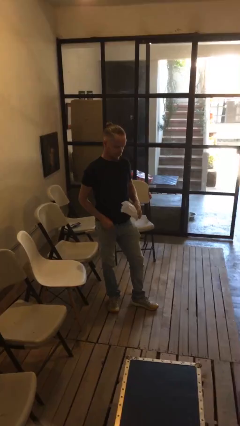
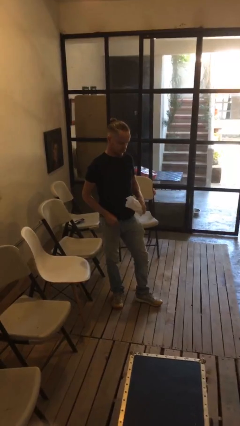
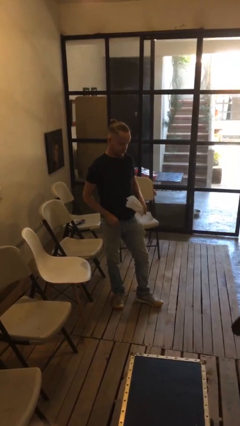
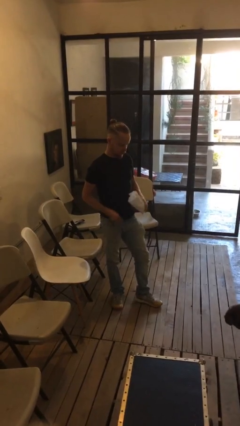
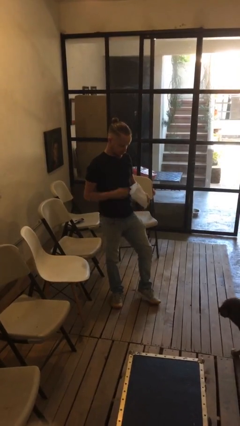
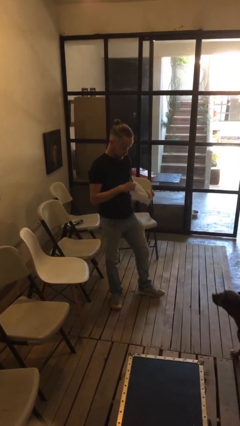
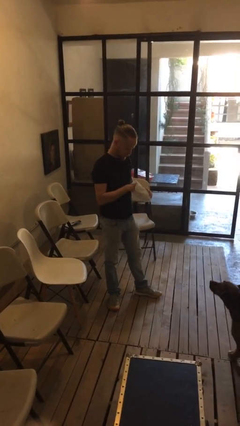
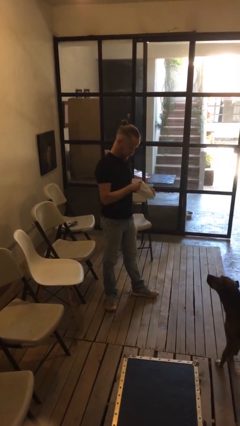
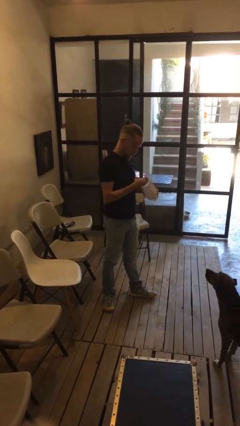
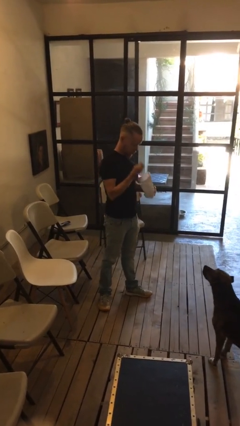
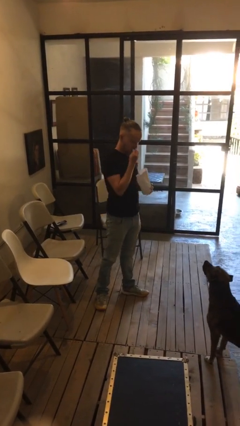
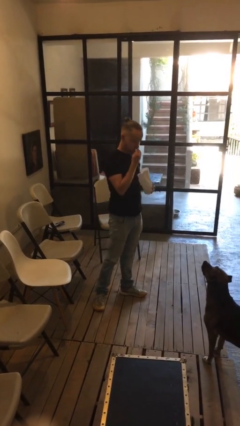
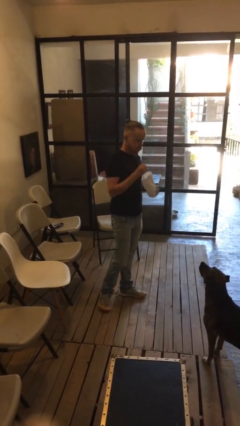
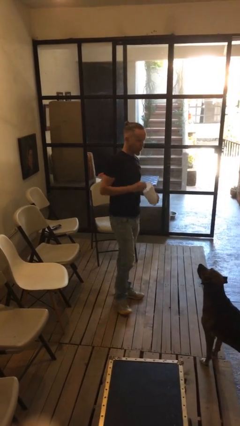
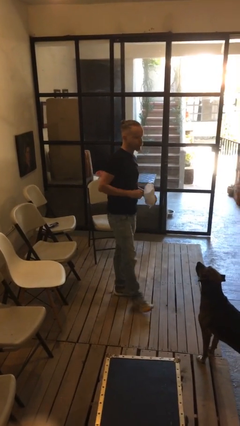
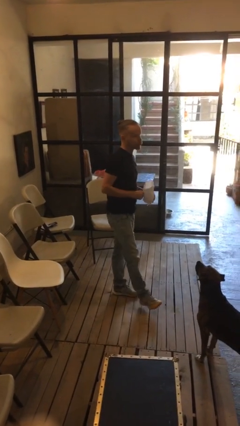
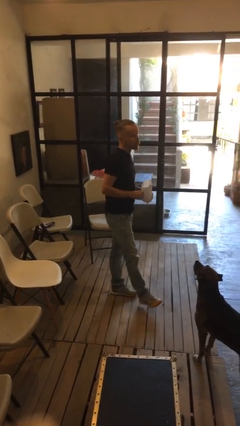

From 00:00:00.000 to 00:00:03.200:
person eats snack from bag

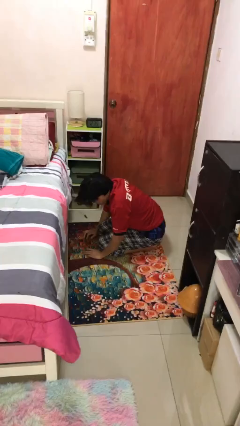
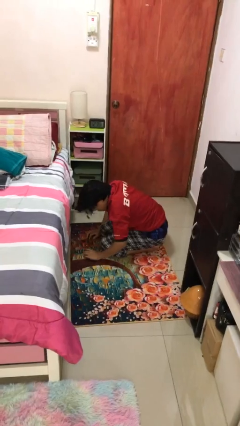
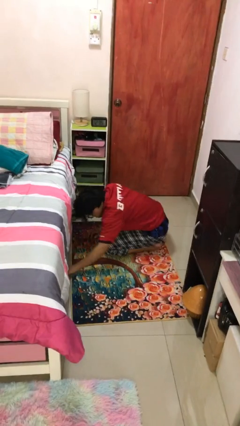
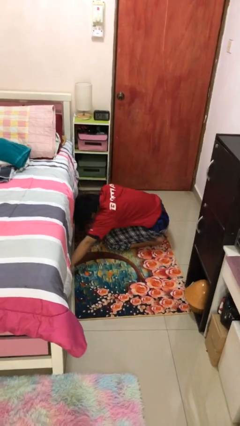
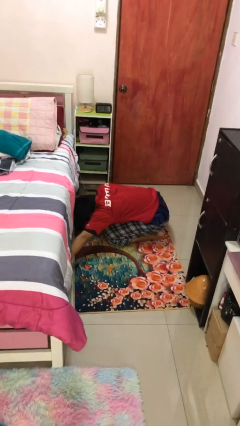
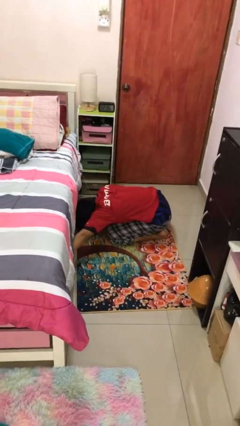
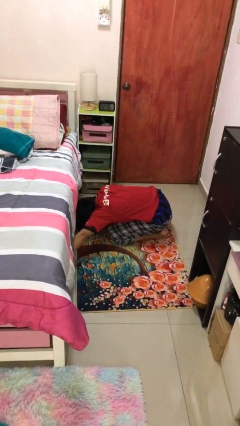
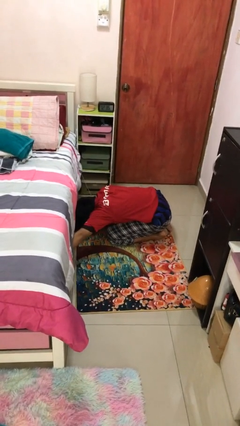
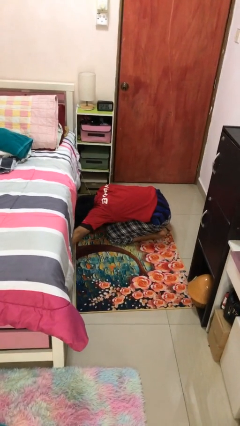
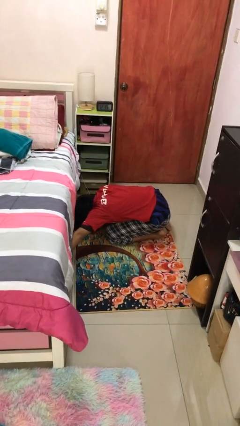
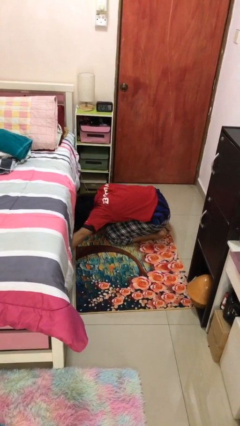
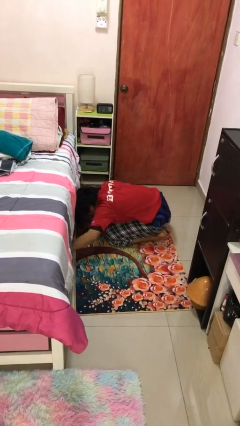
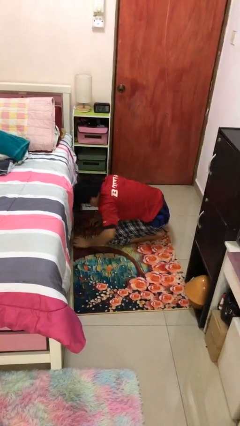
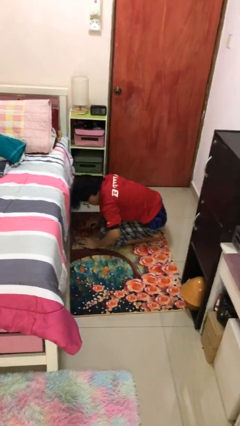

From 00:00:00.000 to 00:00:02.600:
person searches under bed

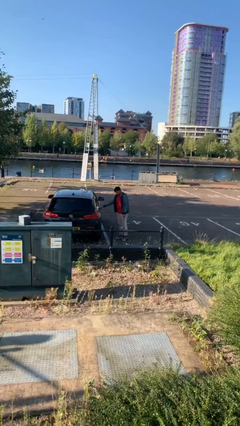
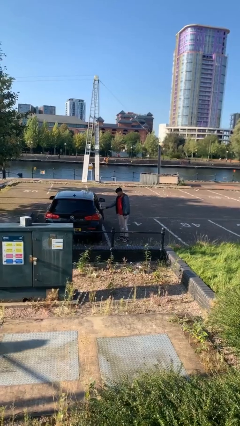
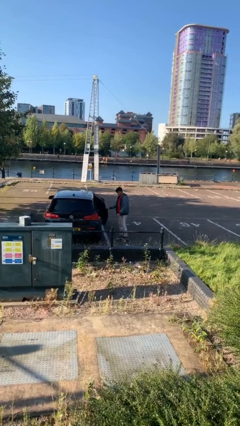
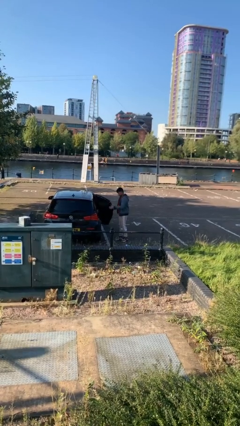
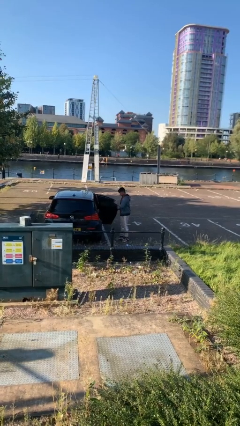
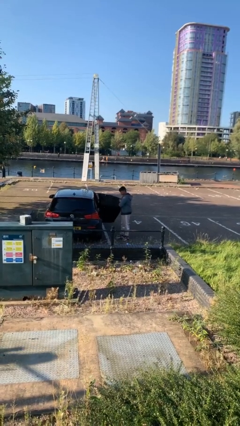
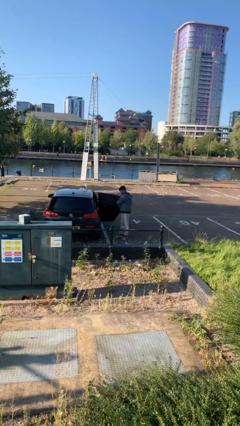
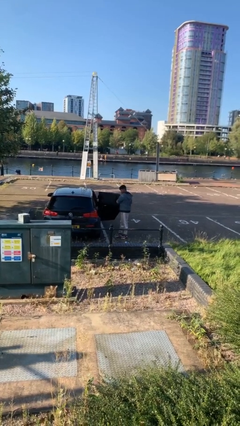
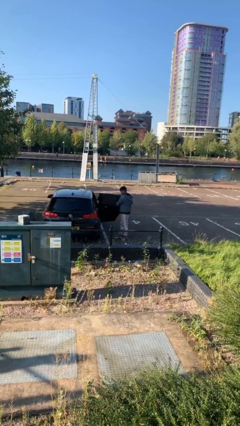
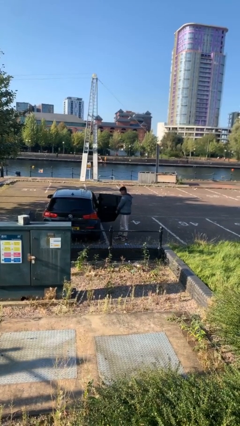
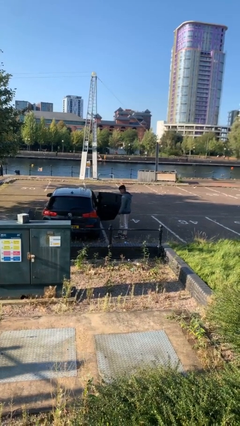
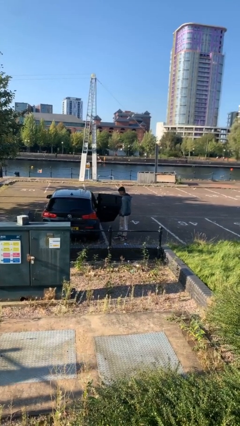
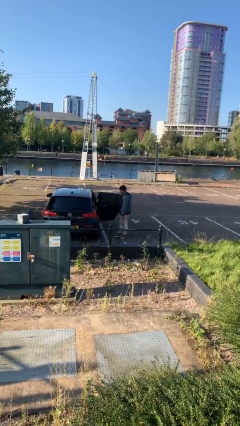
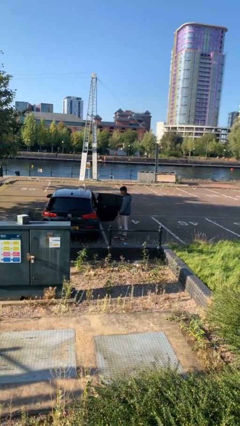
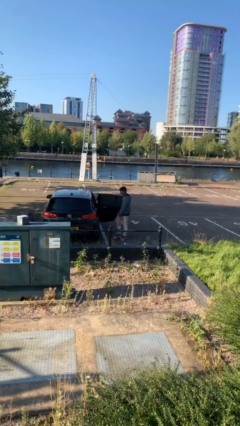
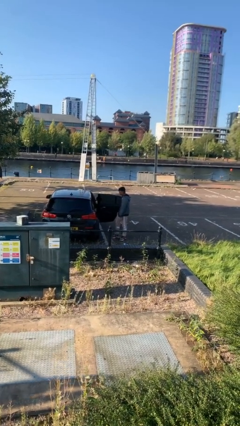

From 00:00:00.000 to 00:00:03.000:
person opens car door

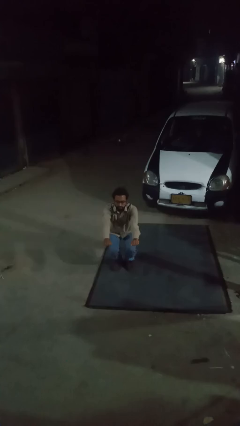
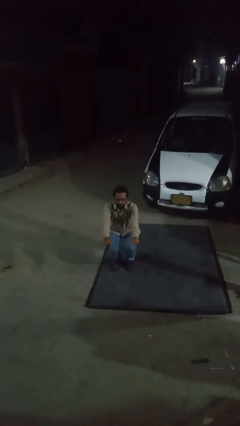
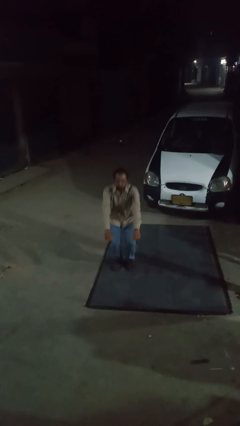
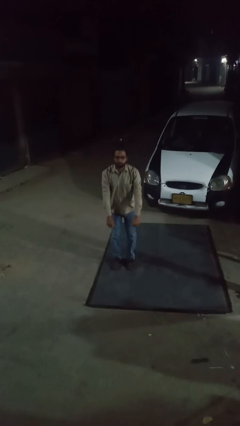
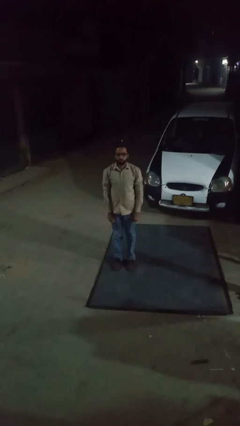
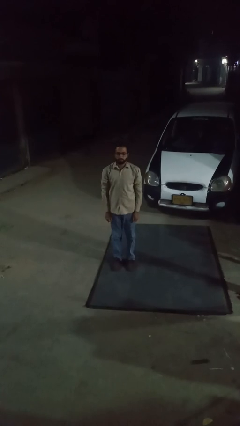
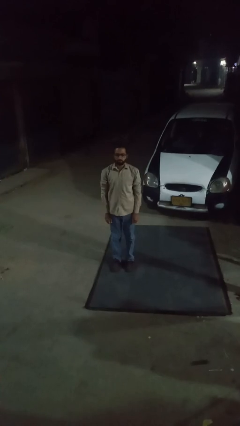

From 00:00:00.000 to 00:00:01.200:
person stands up

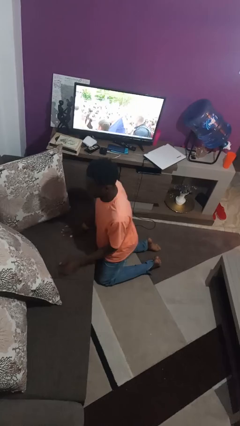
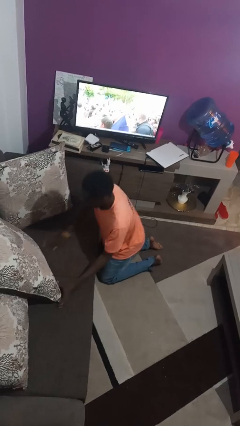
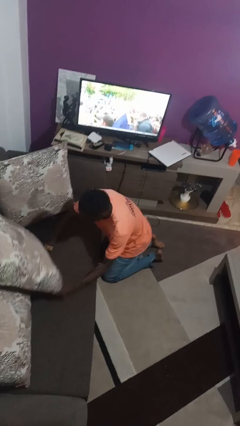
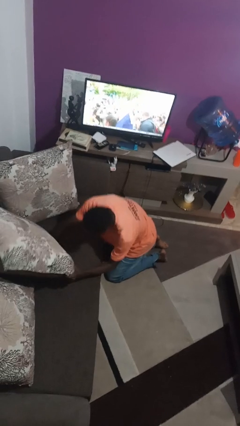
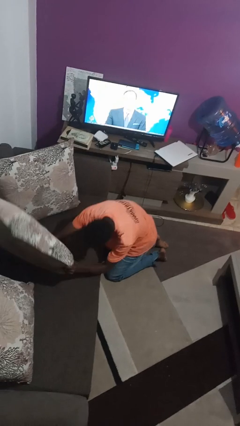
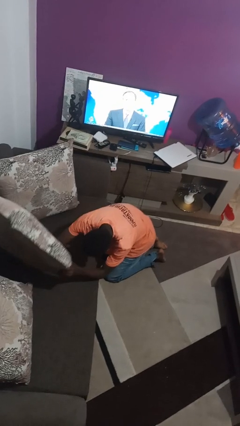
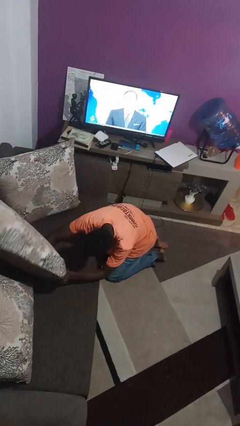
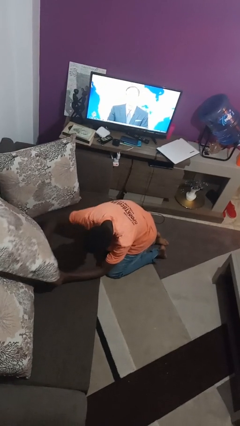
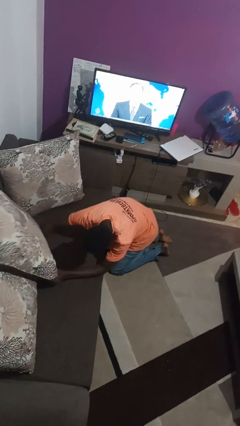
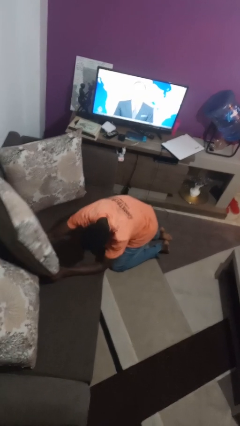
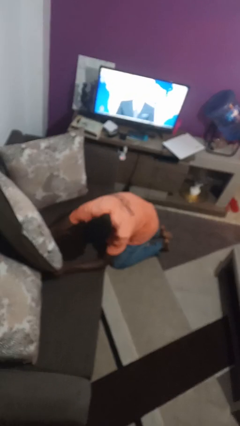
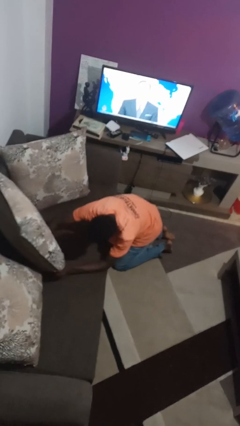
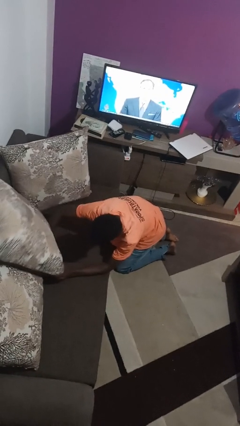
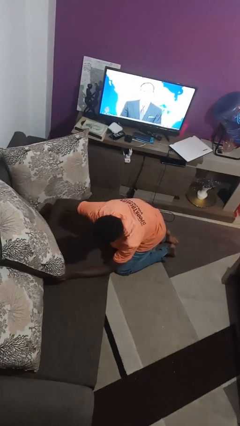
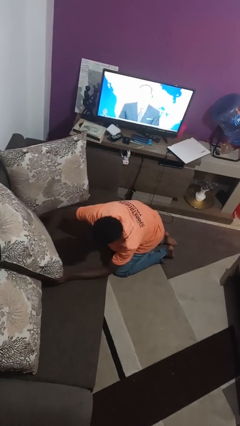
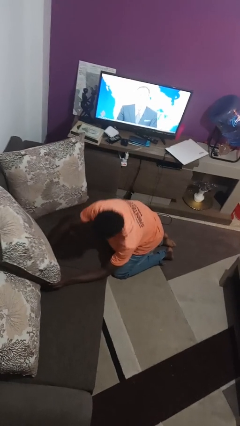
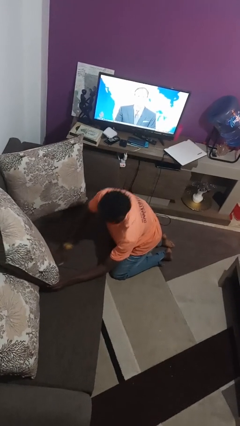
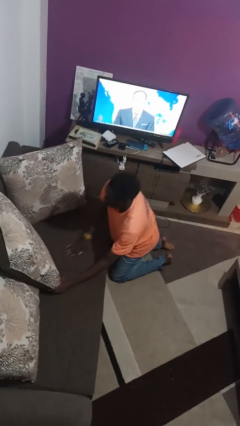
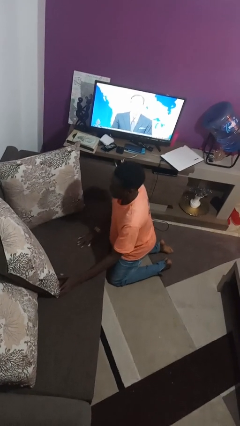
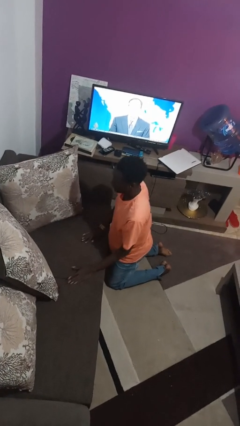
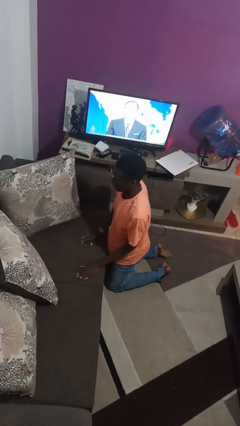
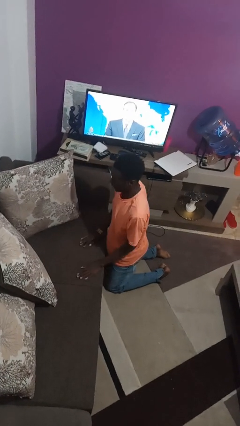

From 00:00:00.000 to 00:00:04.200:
person searches in couch

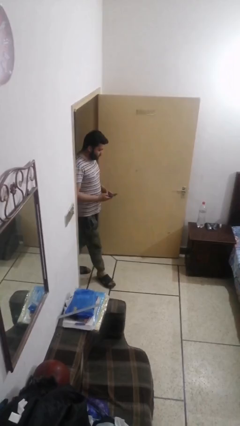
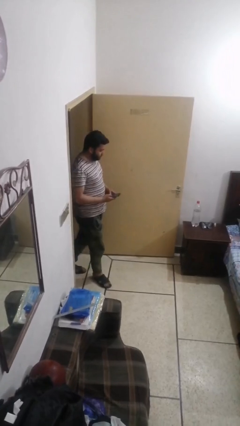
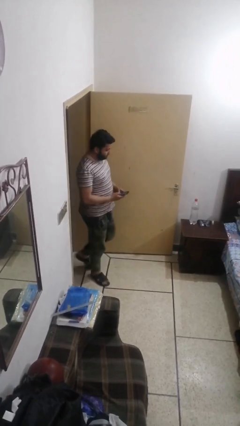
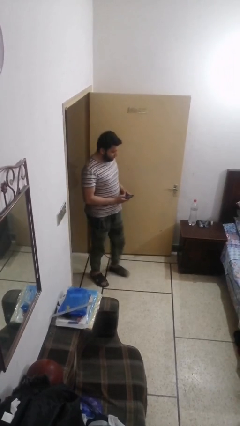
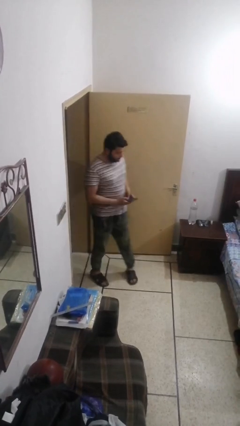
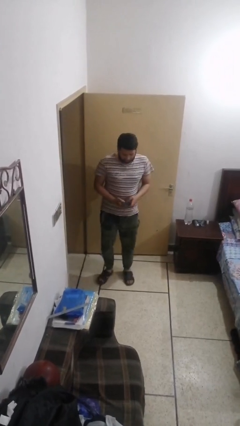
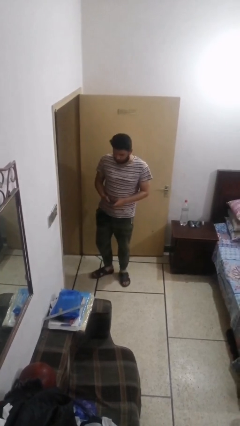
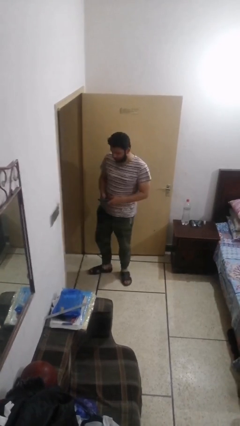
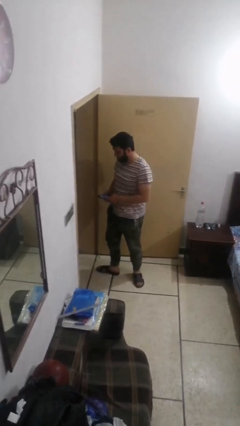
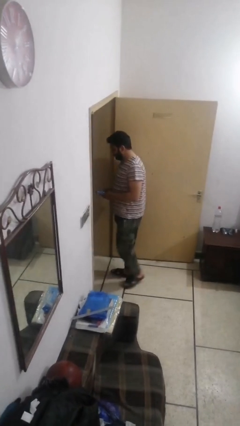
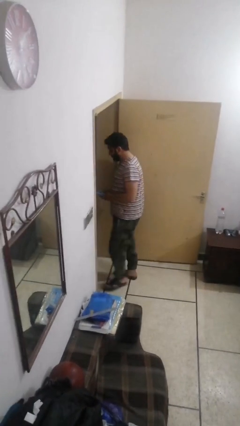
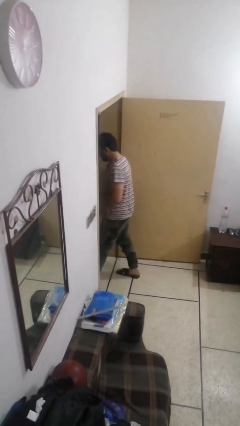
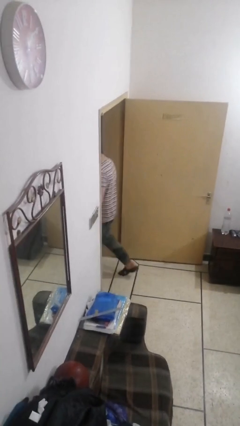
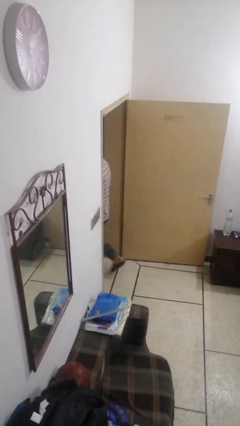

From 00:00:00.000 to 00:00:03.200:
person enters scene through structure

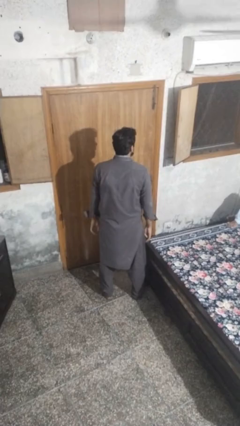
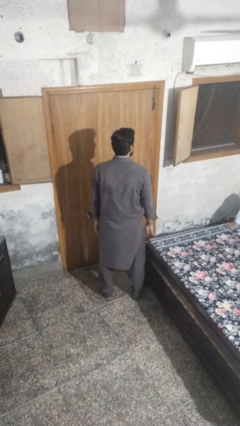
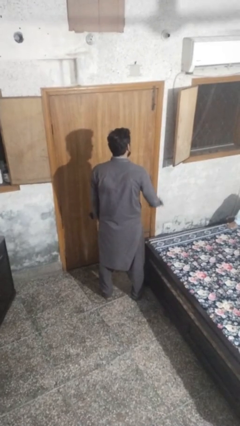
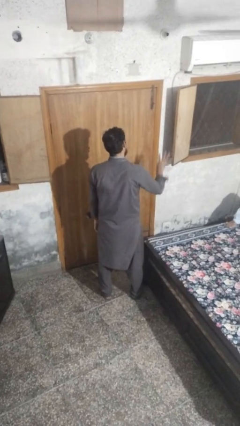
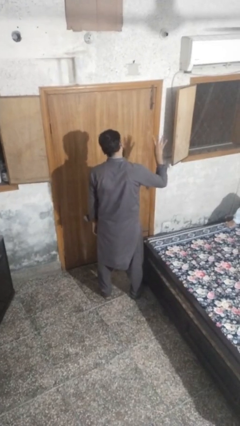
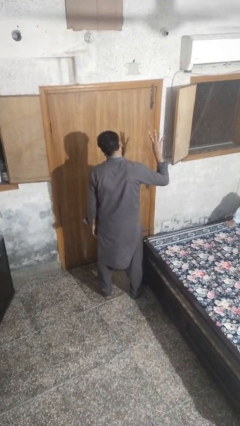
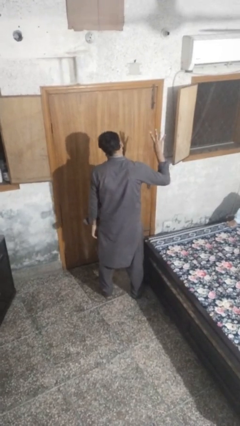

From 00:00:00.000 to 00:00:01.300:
person gestures number four
